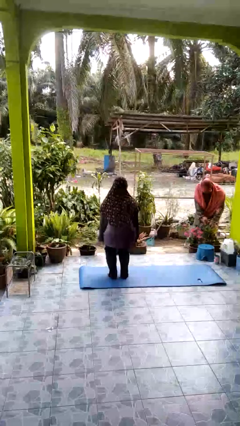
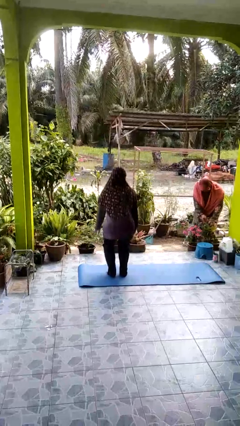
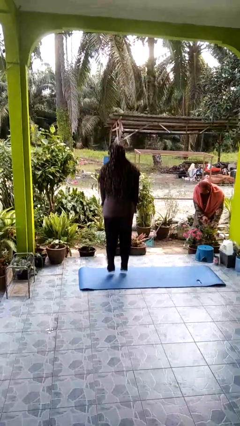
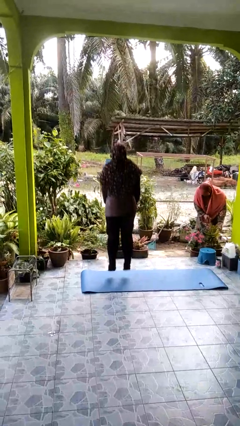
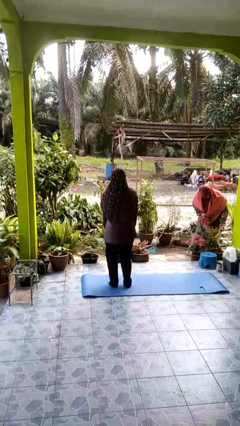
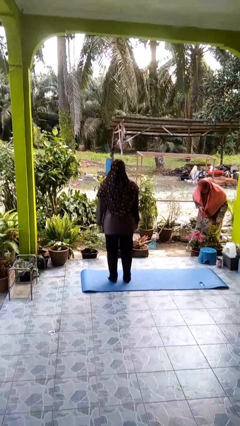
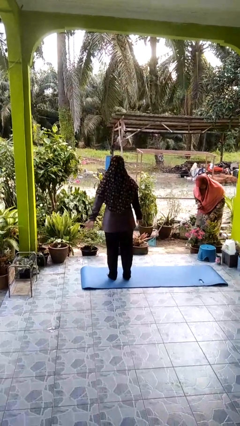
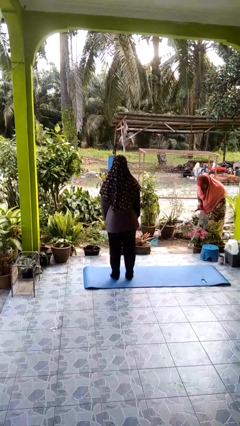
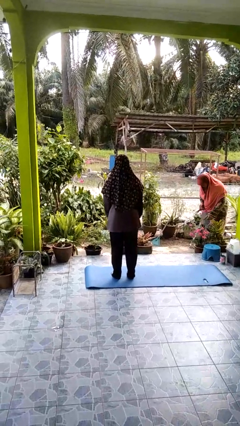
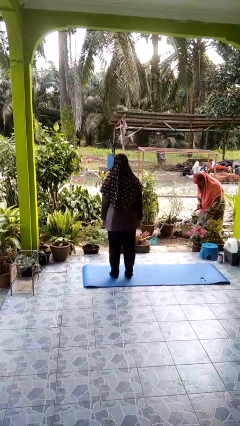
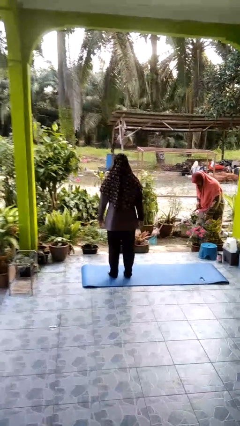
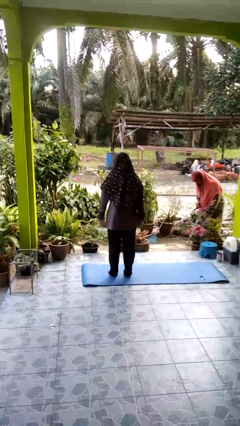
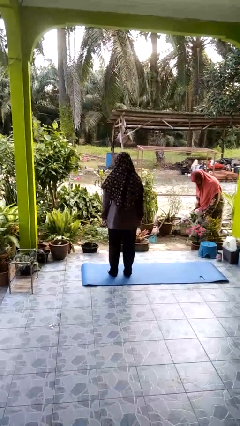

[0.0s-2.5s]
person jumps

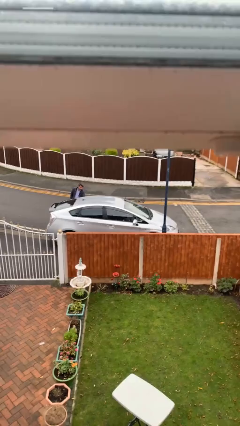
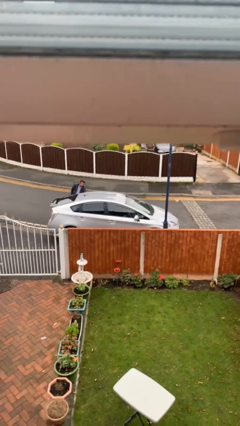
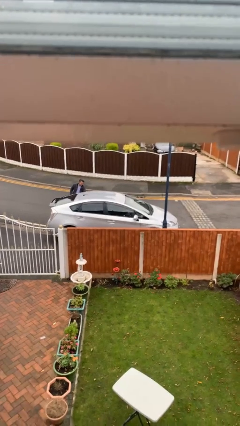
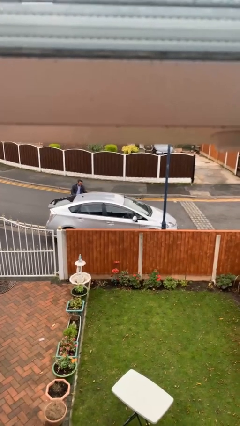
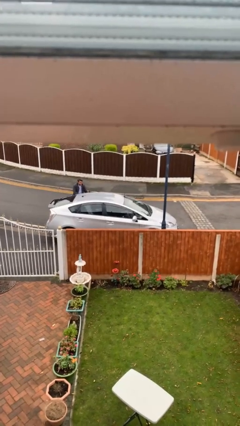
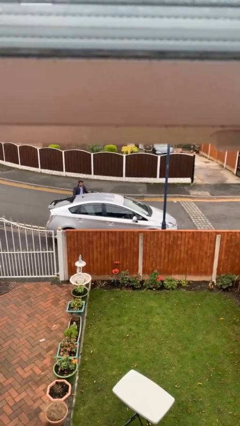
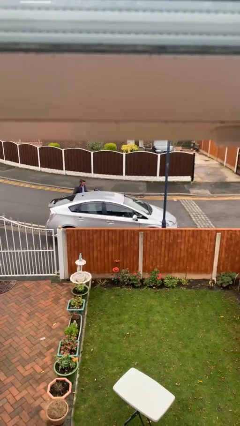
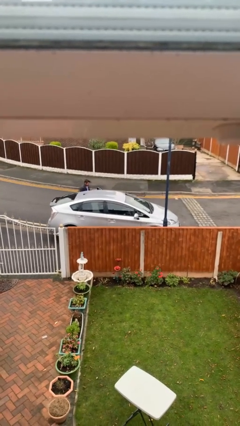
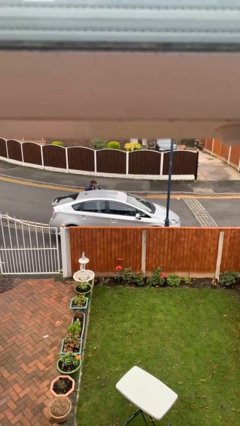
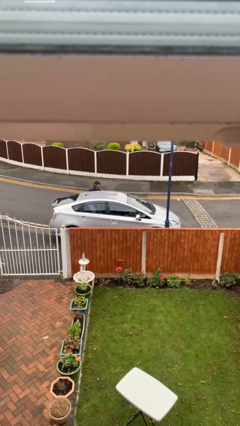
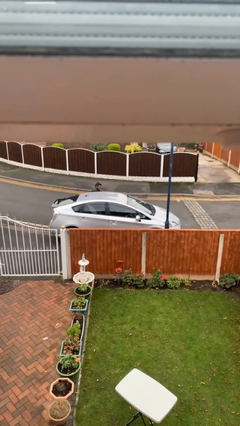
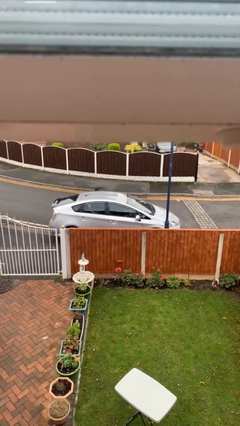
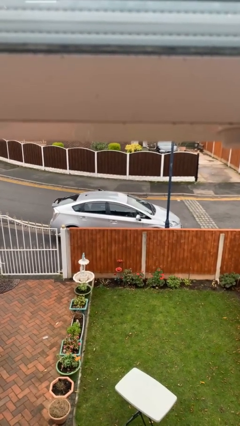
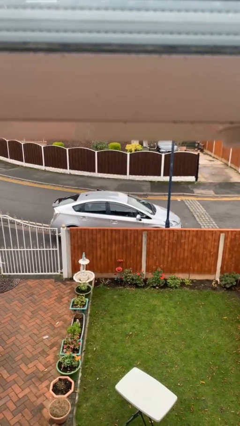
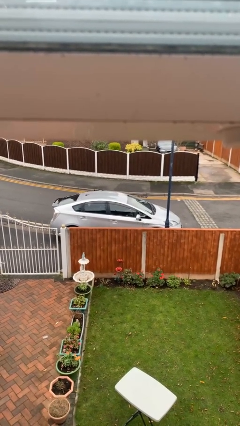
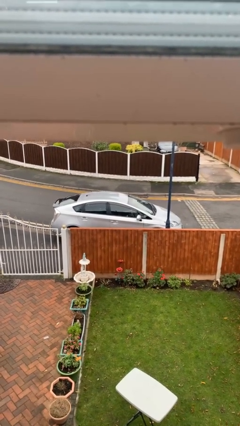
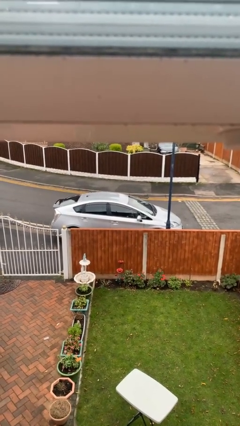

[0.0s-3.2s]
car picks up person

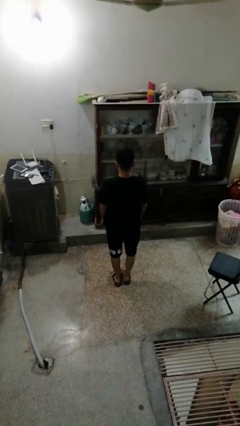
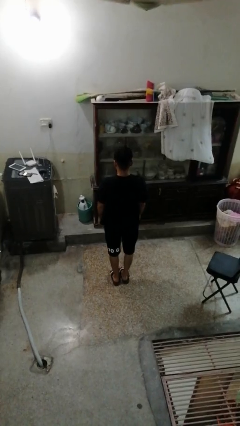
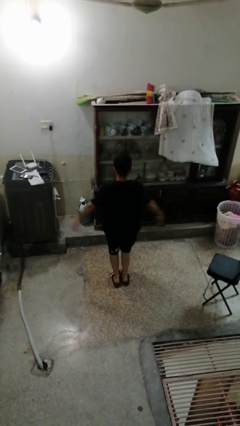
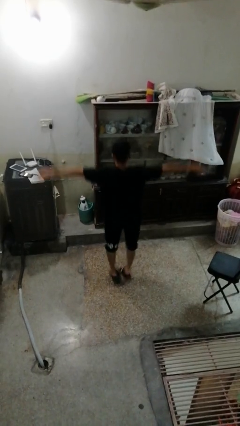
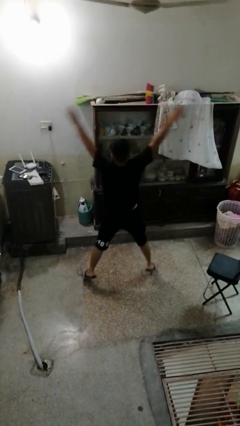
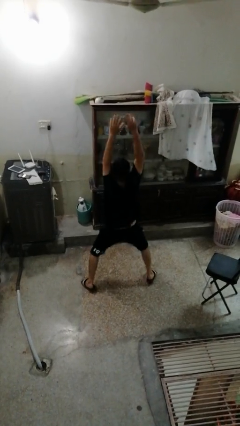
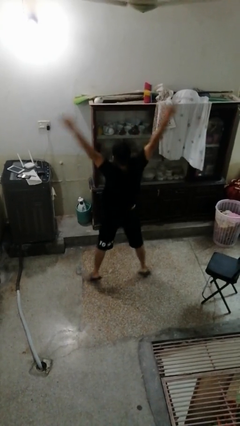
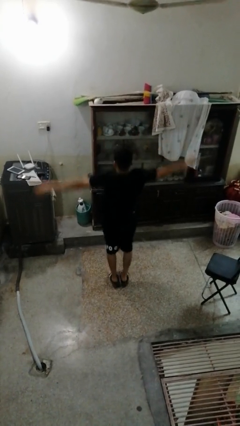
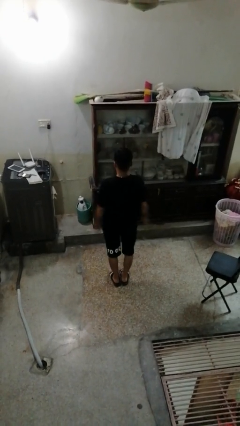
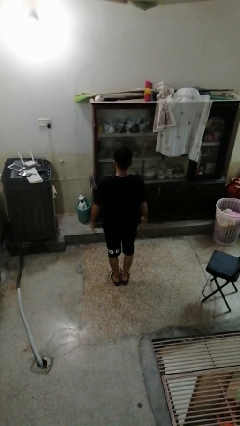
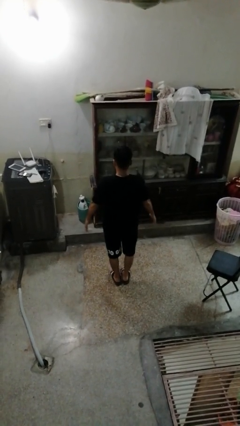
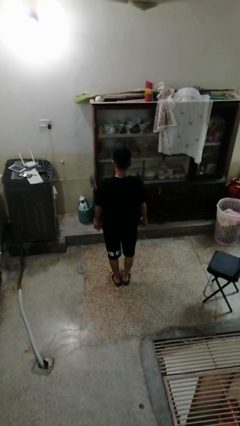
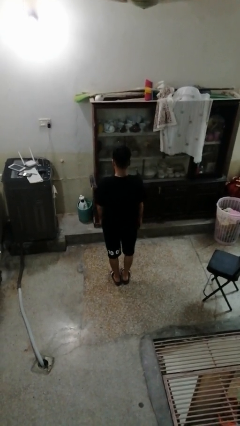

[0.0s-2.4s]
person exercises with jumping jacks

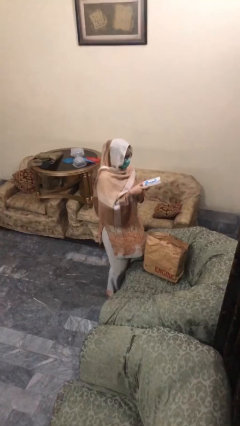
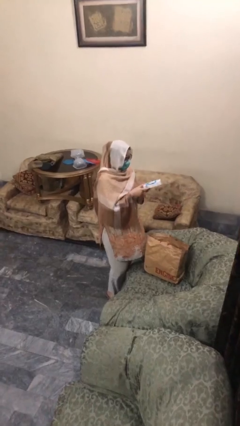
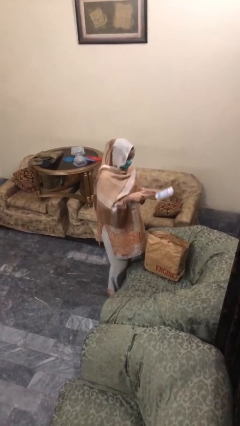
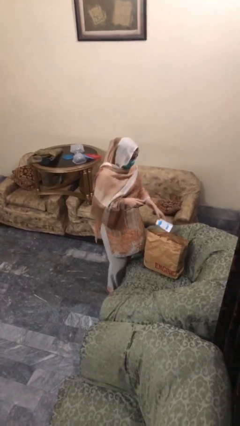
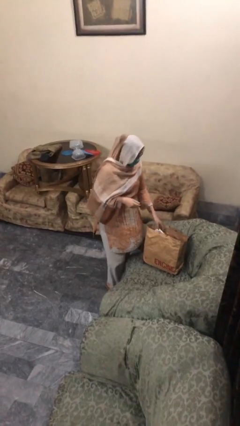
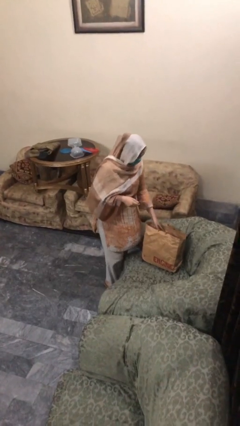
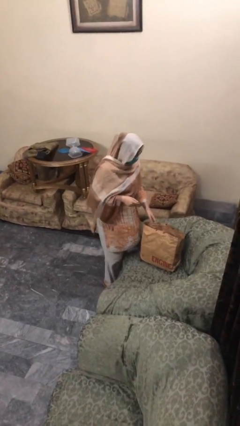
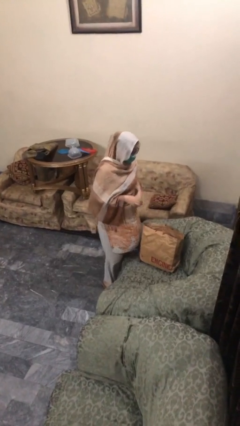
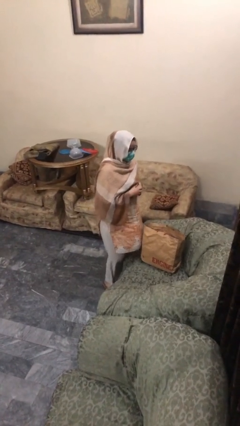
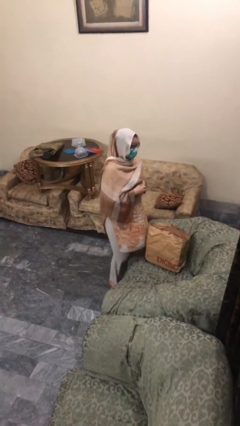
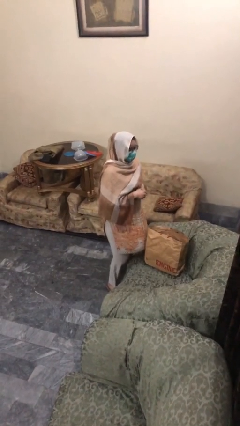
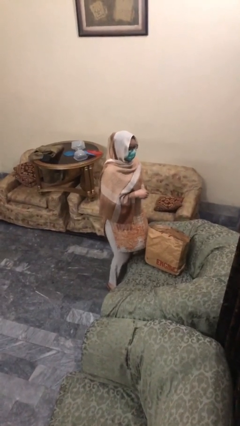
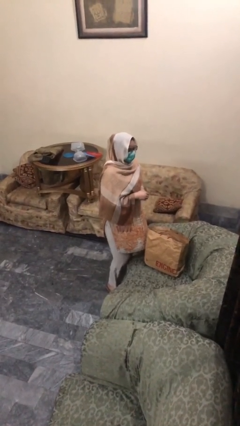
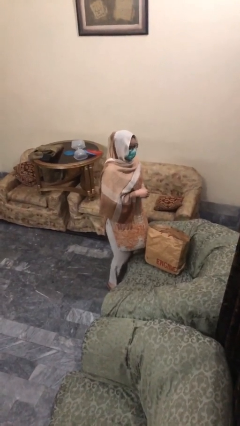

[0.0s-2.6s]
person puts object into bag

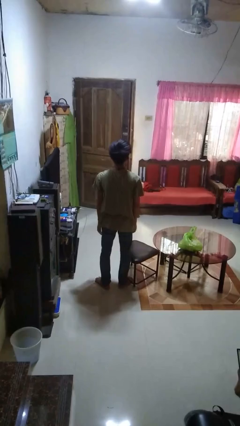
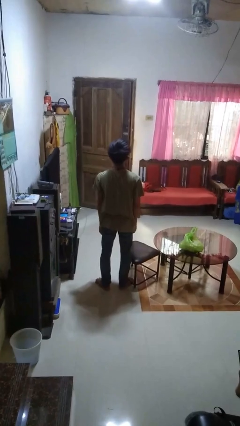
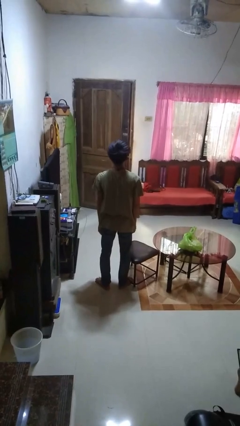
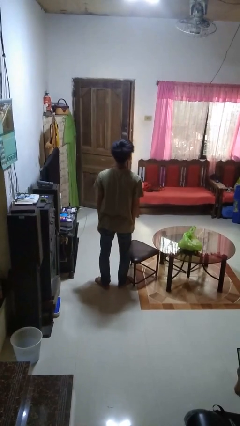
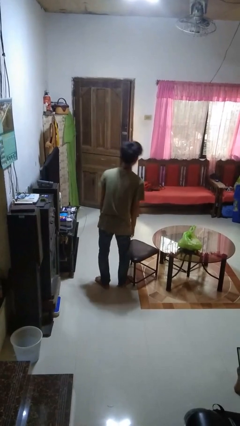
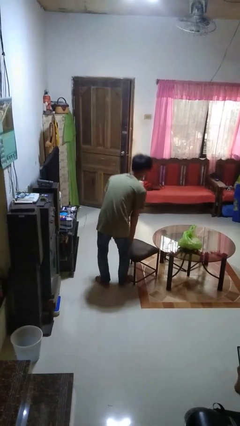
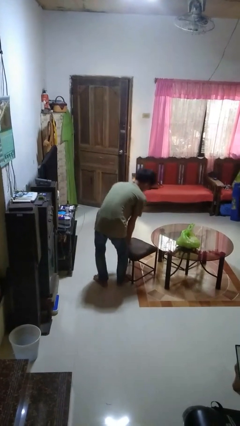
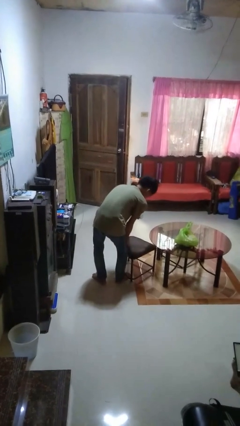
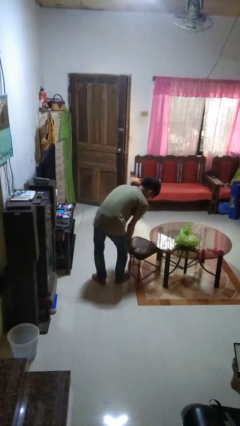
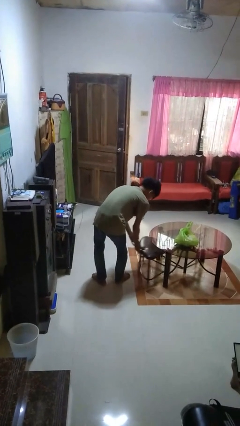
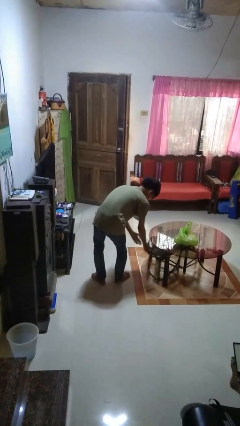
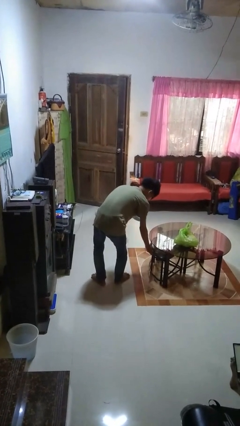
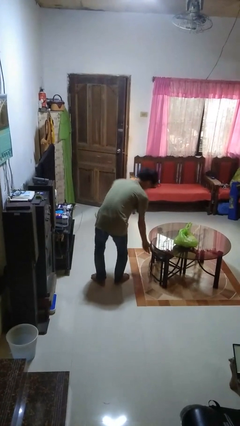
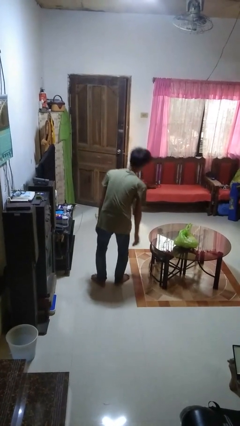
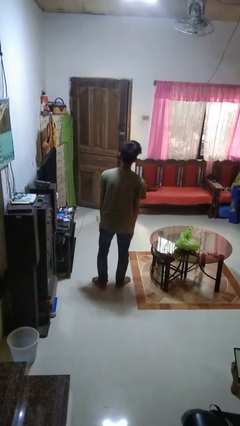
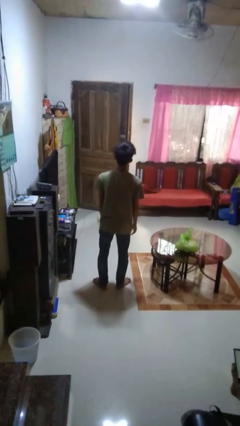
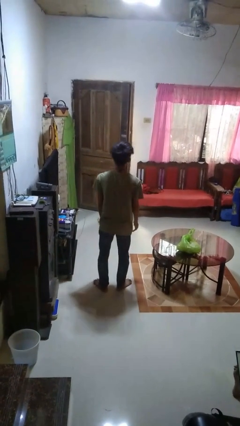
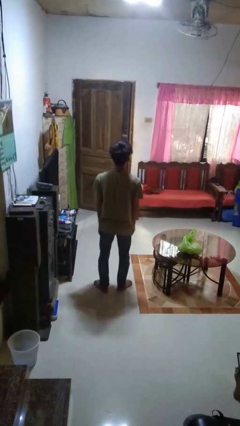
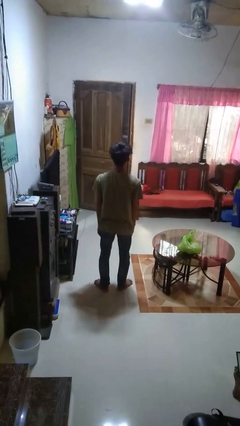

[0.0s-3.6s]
person pushes in chair

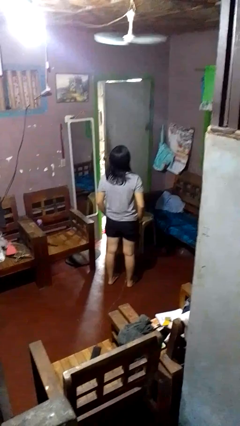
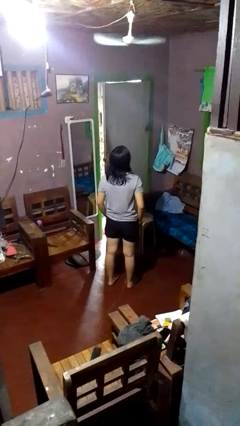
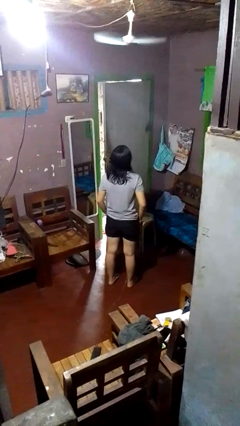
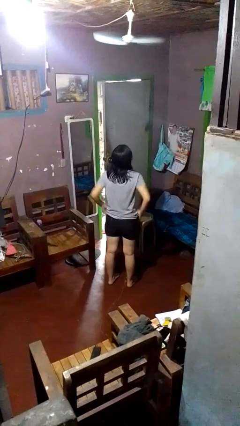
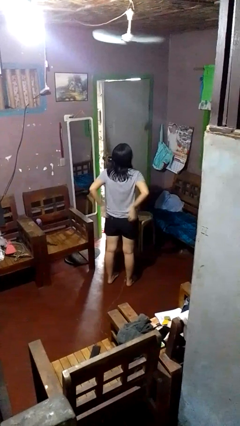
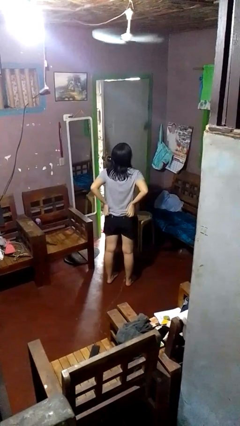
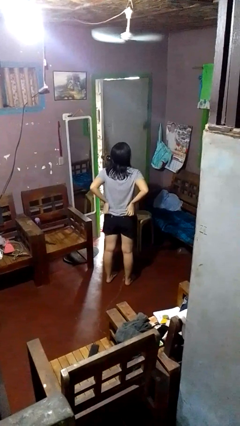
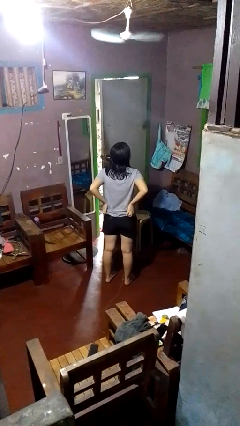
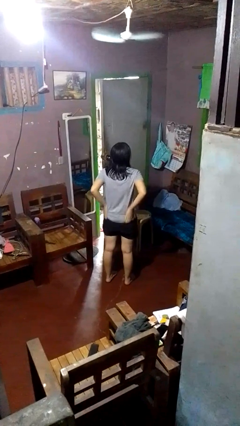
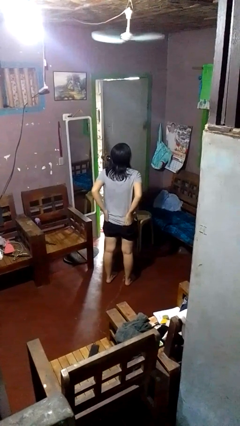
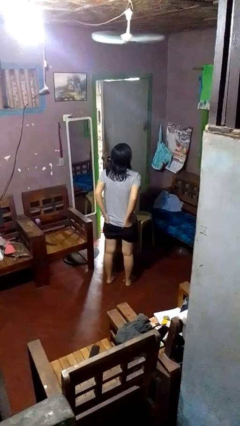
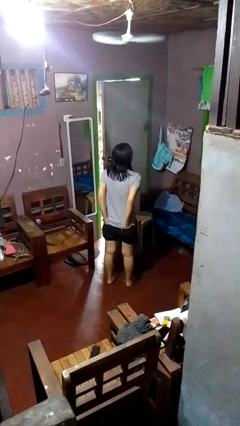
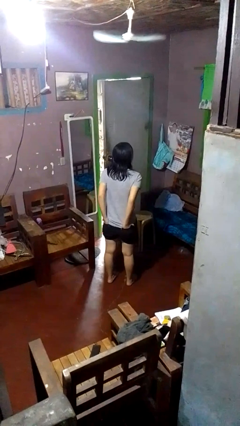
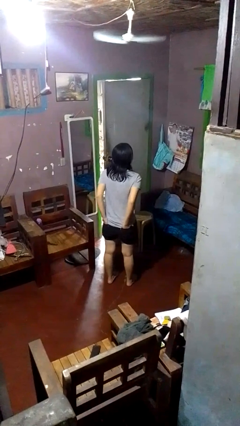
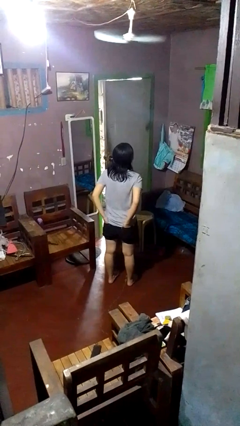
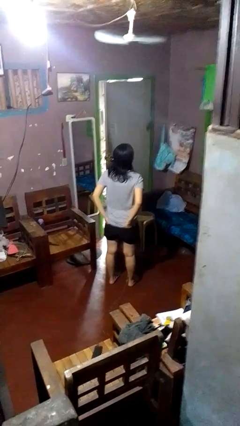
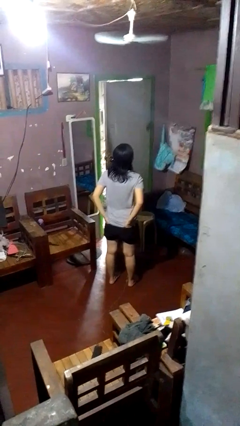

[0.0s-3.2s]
person puts hands in back pockets
